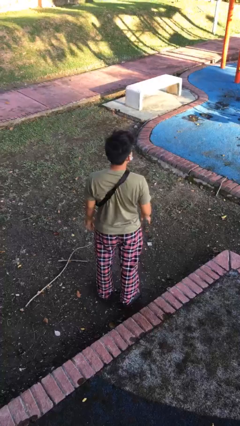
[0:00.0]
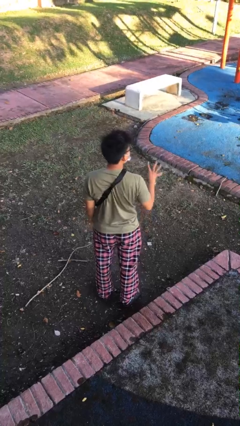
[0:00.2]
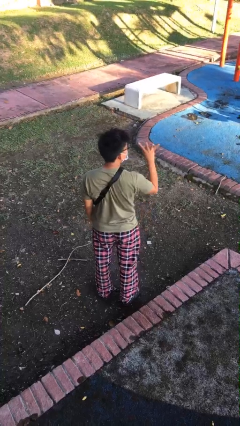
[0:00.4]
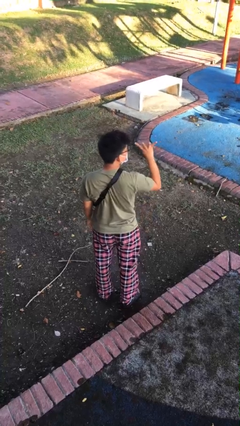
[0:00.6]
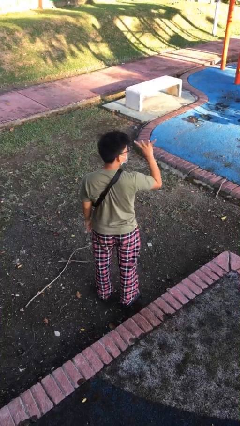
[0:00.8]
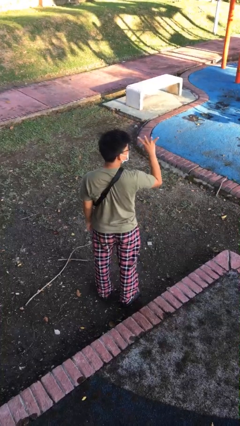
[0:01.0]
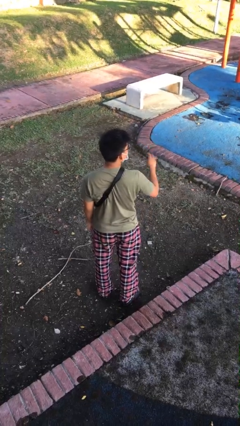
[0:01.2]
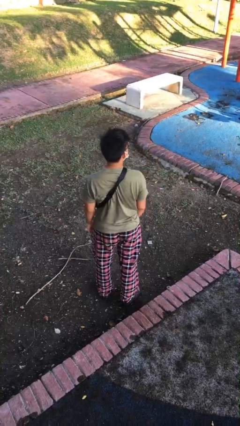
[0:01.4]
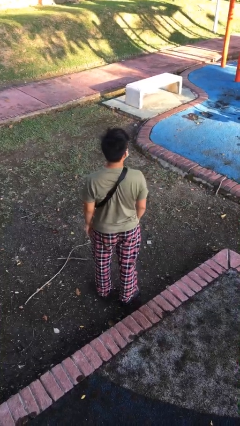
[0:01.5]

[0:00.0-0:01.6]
person gestures number four

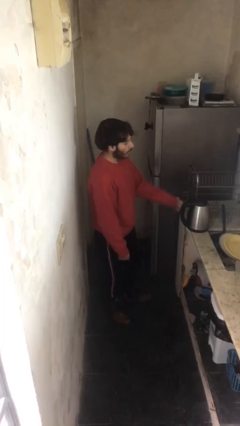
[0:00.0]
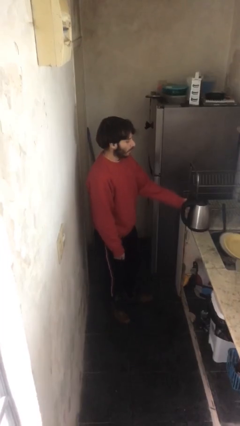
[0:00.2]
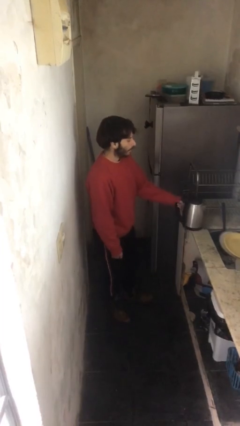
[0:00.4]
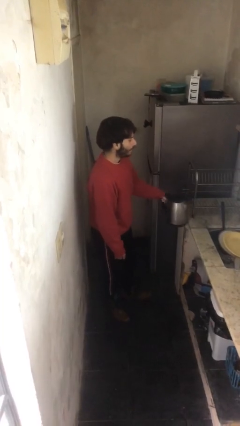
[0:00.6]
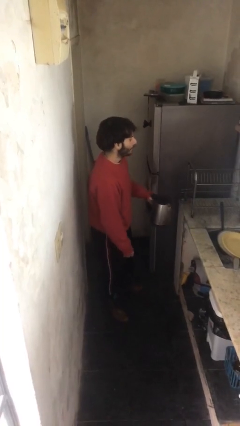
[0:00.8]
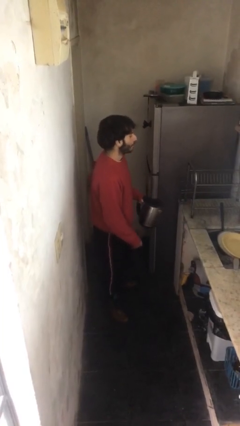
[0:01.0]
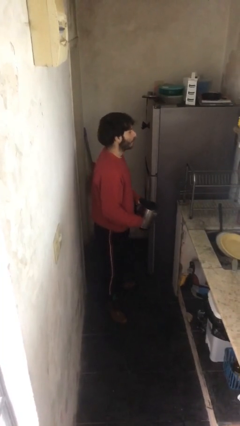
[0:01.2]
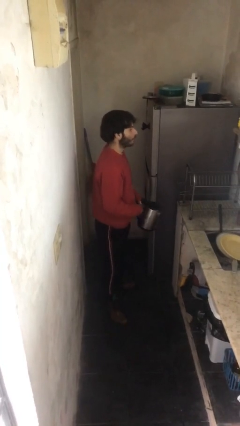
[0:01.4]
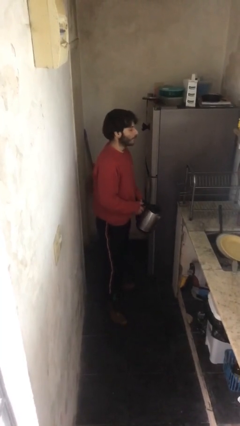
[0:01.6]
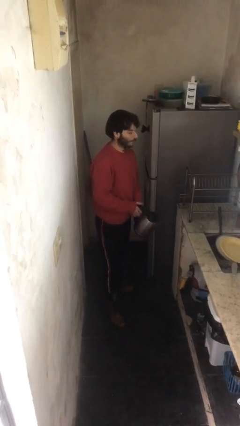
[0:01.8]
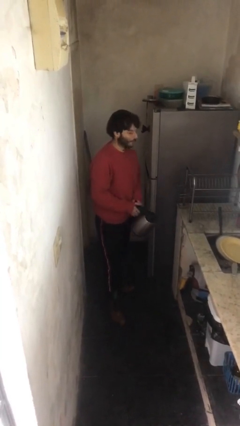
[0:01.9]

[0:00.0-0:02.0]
person picks up object from countertop

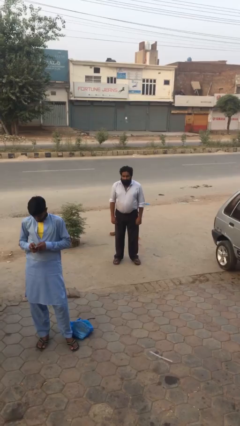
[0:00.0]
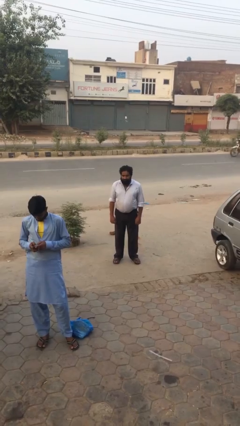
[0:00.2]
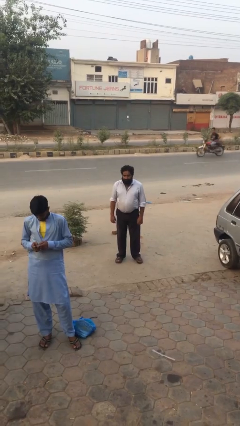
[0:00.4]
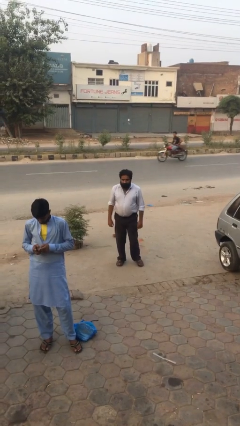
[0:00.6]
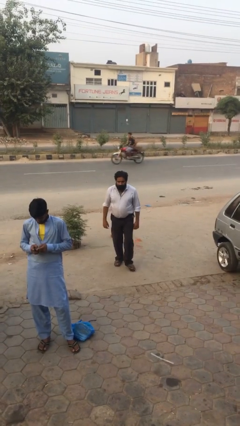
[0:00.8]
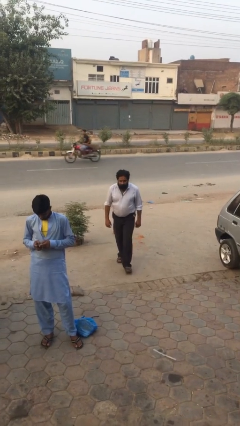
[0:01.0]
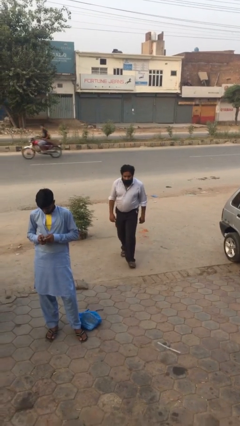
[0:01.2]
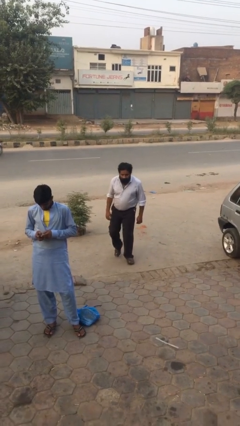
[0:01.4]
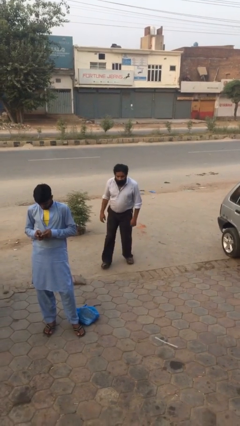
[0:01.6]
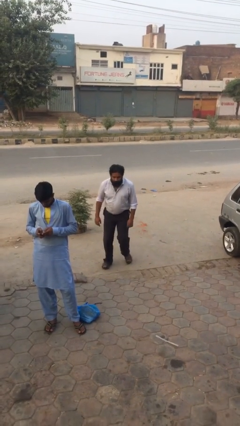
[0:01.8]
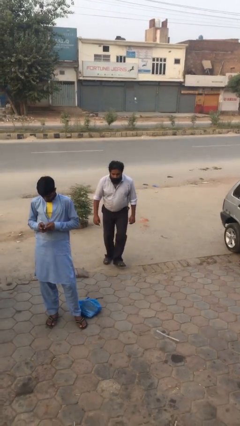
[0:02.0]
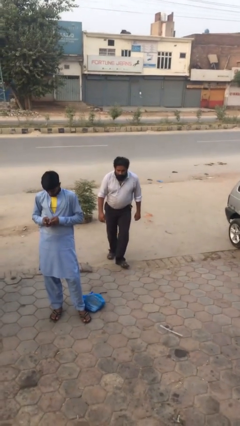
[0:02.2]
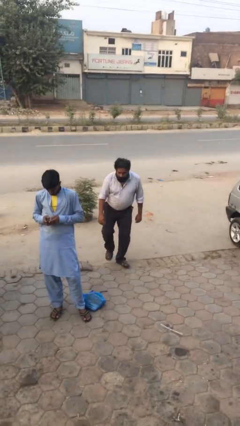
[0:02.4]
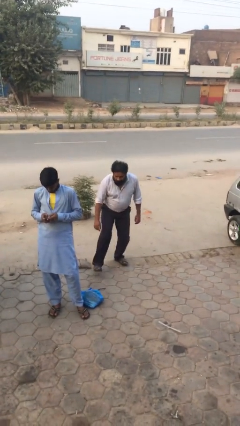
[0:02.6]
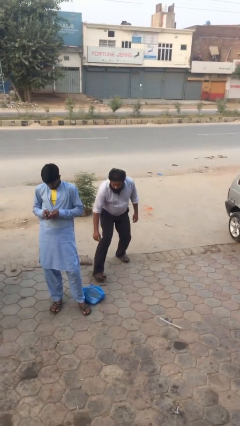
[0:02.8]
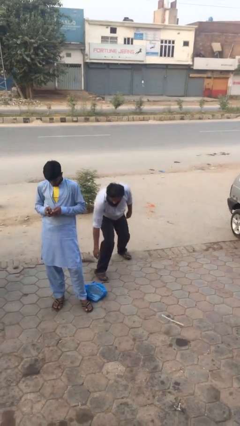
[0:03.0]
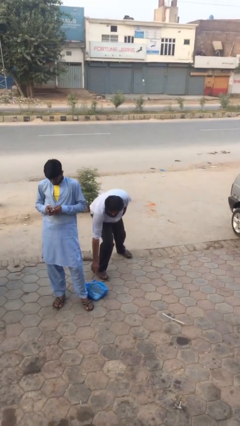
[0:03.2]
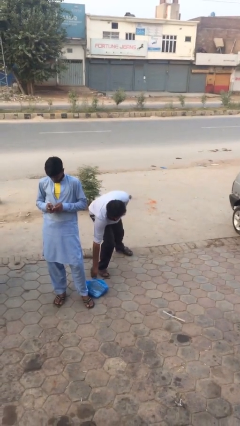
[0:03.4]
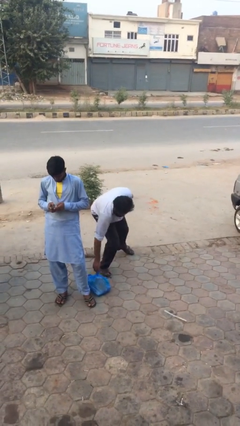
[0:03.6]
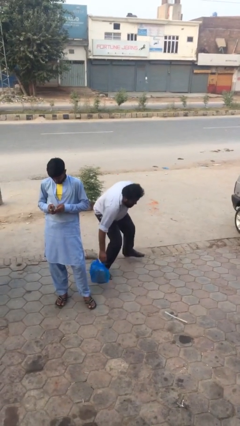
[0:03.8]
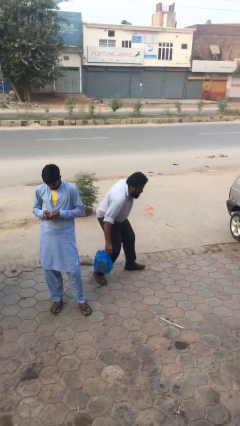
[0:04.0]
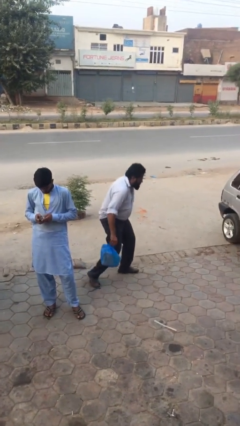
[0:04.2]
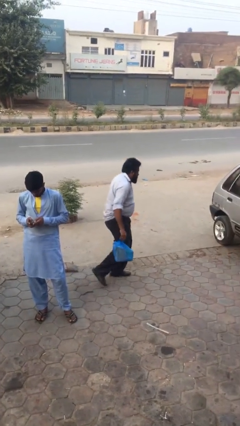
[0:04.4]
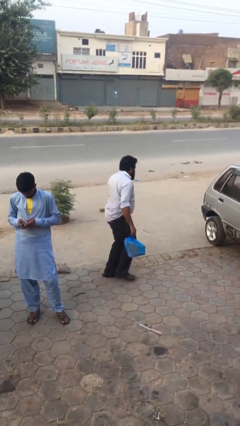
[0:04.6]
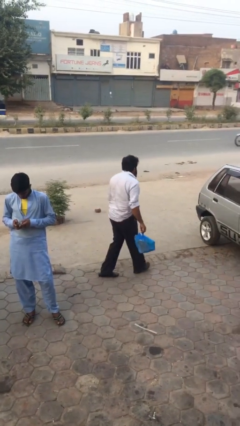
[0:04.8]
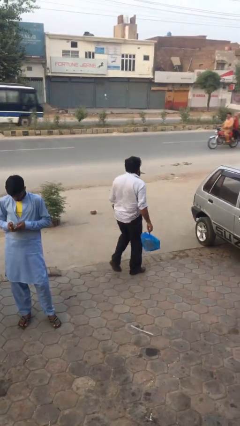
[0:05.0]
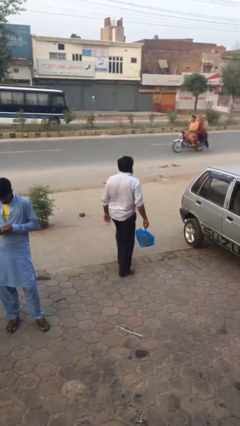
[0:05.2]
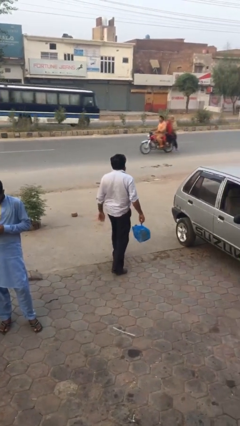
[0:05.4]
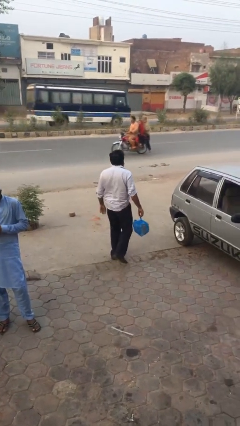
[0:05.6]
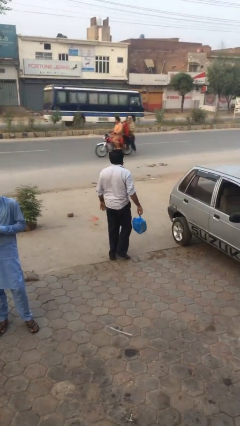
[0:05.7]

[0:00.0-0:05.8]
person steals object from person

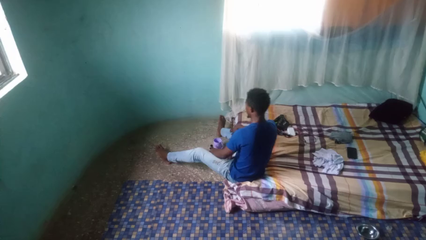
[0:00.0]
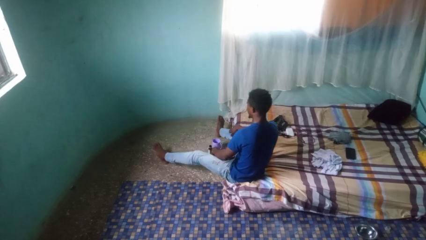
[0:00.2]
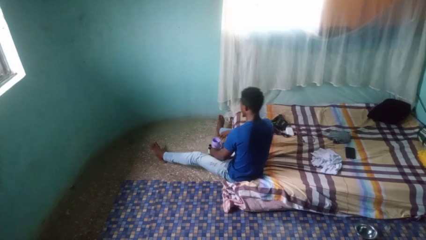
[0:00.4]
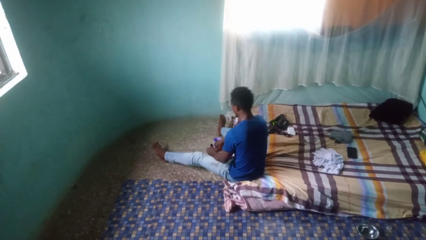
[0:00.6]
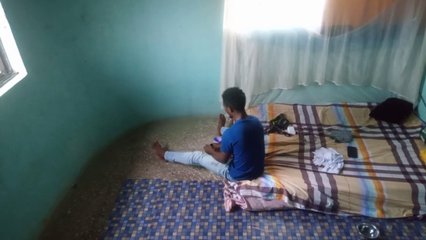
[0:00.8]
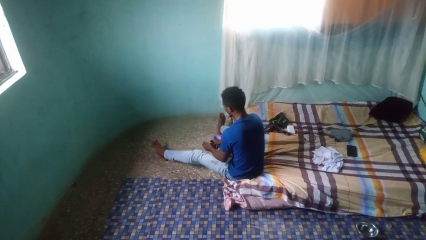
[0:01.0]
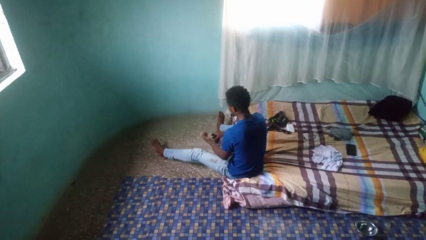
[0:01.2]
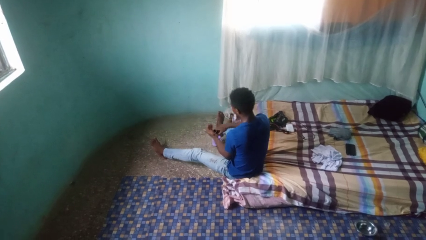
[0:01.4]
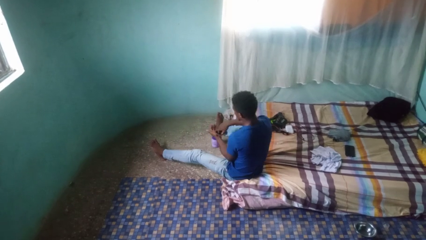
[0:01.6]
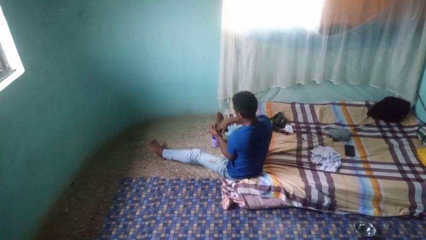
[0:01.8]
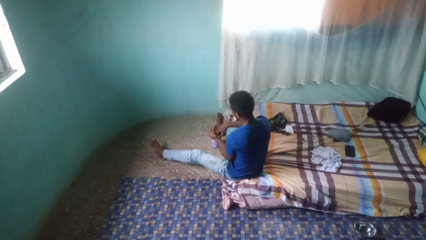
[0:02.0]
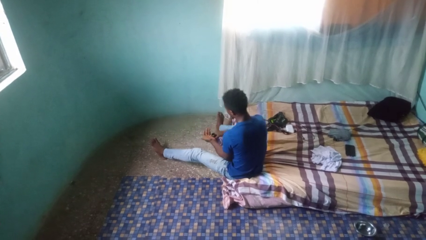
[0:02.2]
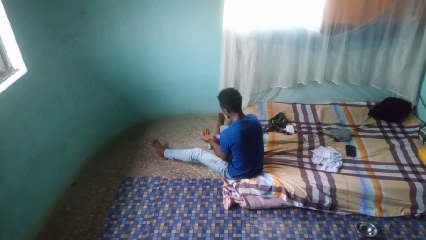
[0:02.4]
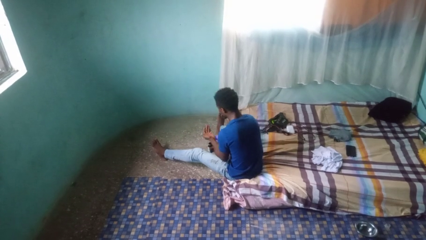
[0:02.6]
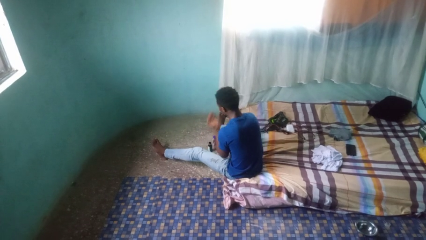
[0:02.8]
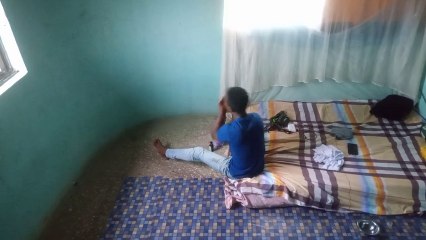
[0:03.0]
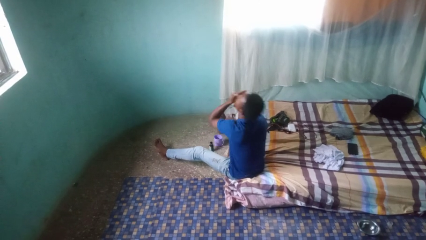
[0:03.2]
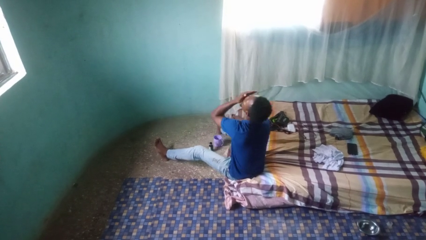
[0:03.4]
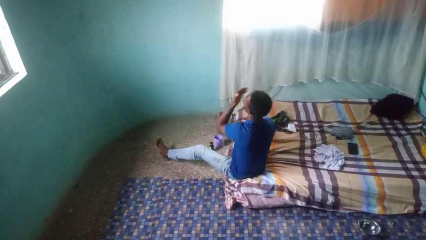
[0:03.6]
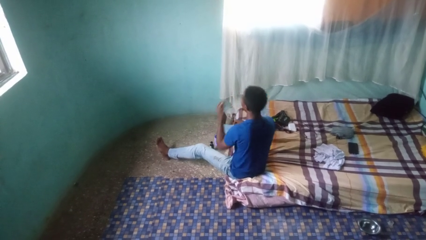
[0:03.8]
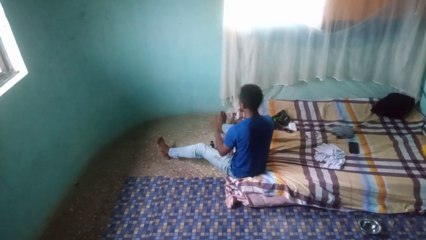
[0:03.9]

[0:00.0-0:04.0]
person takes medicine pills

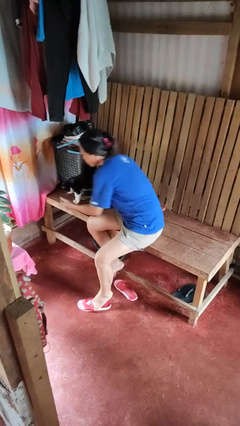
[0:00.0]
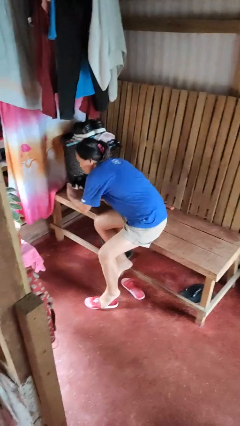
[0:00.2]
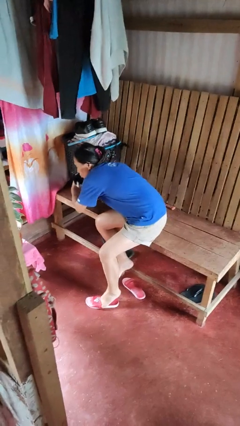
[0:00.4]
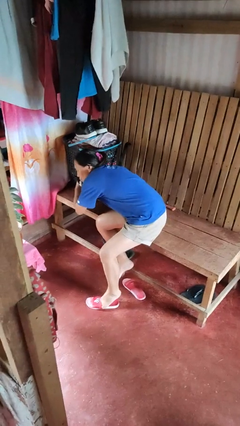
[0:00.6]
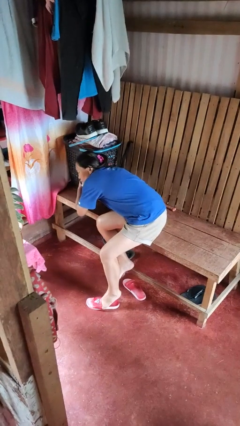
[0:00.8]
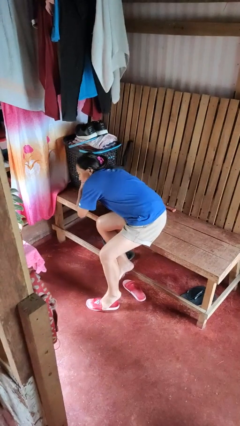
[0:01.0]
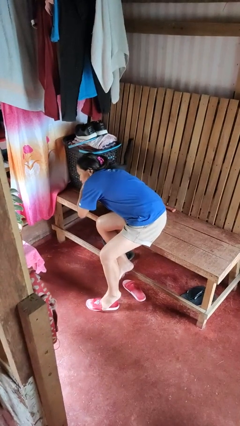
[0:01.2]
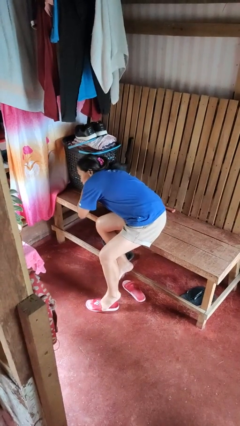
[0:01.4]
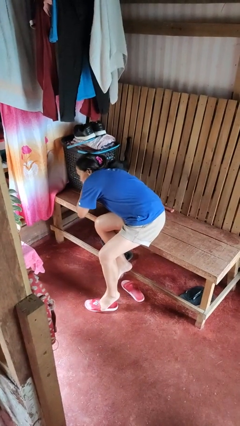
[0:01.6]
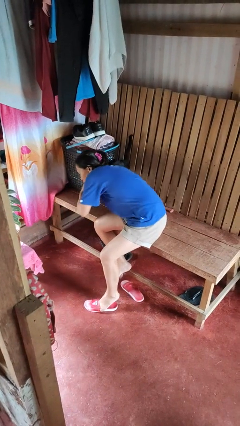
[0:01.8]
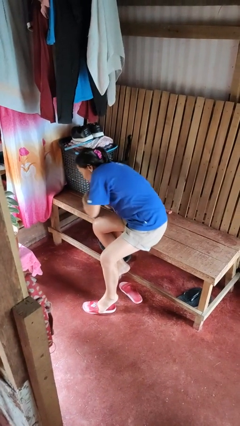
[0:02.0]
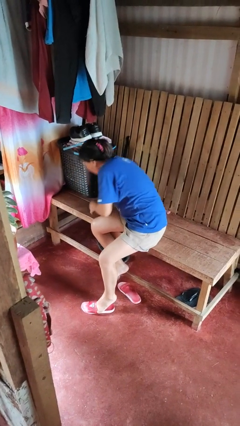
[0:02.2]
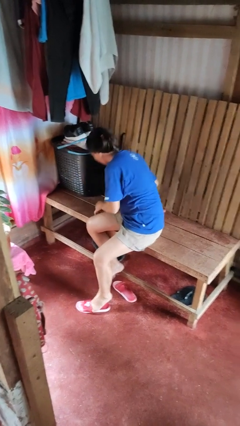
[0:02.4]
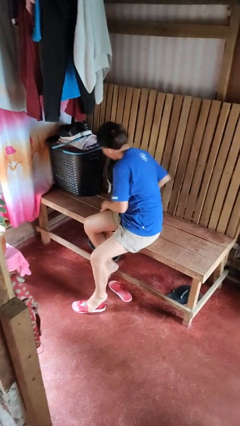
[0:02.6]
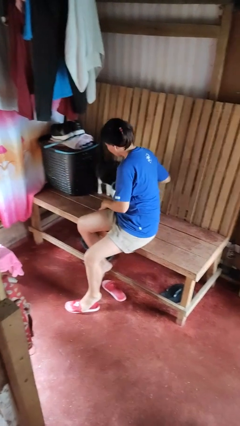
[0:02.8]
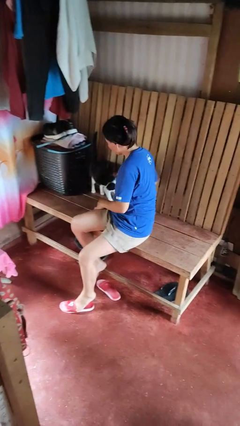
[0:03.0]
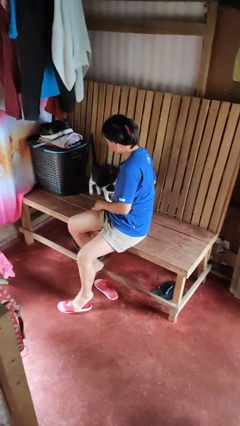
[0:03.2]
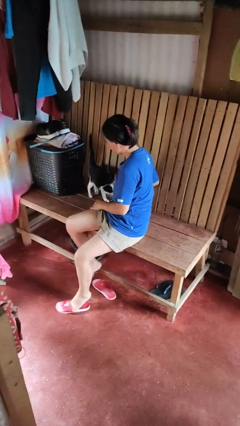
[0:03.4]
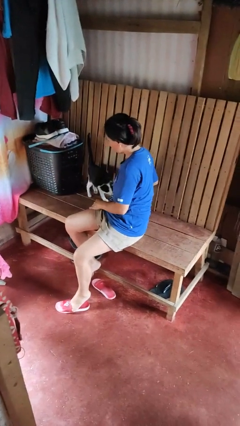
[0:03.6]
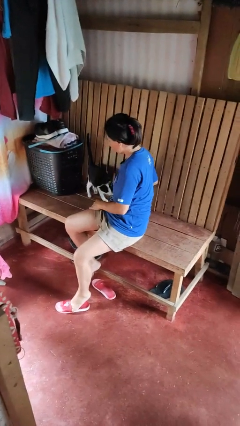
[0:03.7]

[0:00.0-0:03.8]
person hugs cat

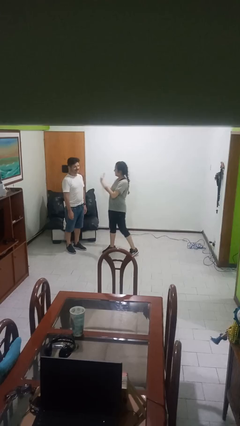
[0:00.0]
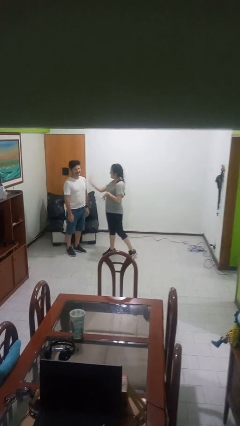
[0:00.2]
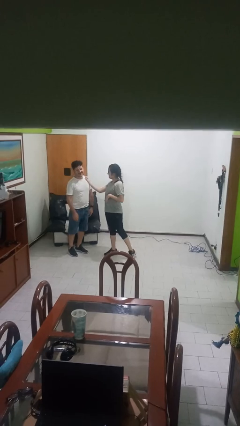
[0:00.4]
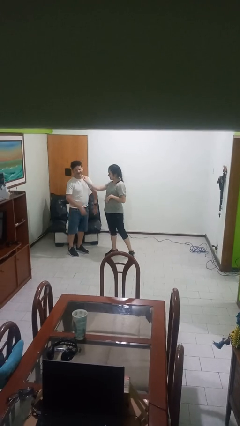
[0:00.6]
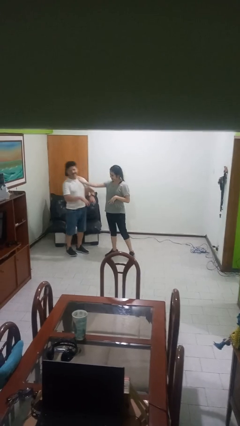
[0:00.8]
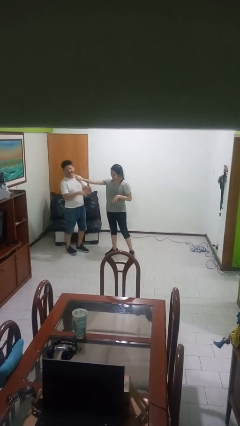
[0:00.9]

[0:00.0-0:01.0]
person shoves person
